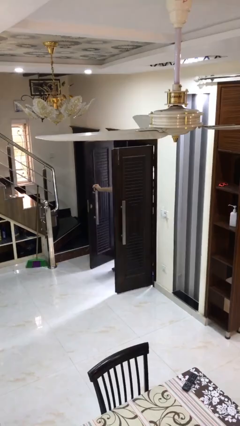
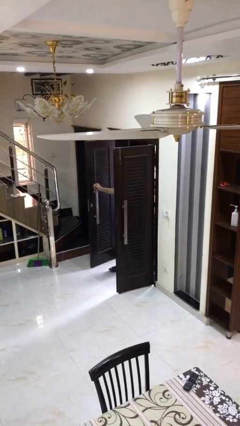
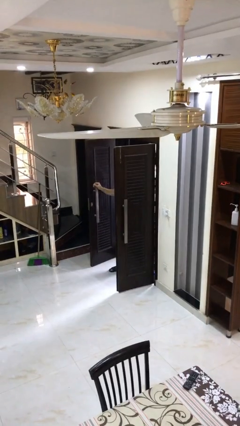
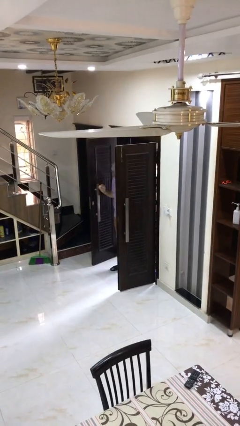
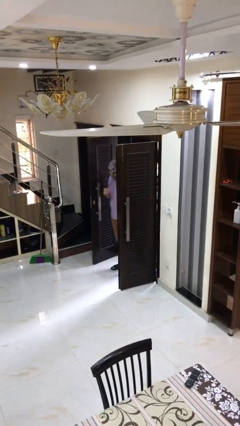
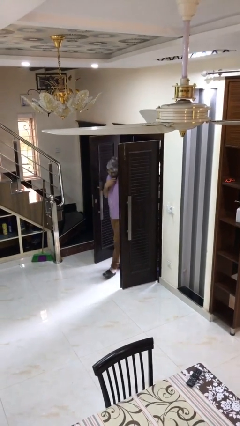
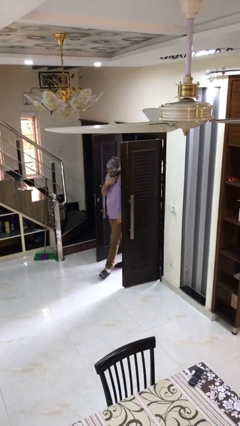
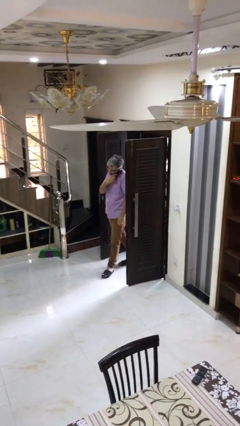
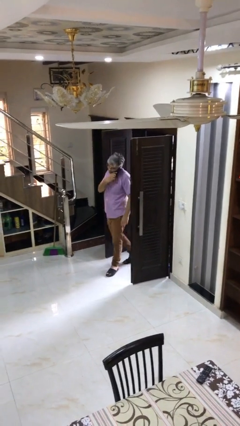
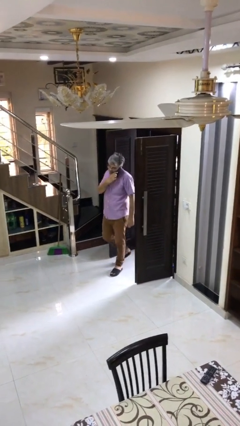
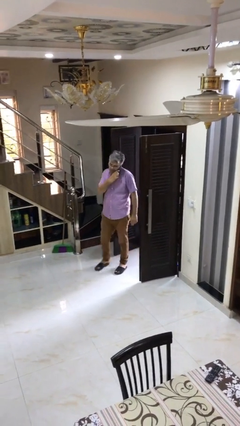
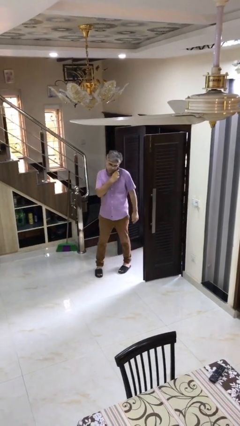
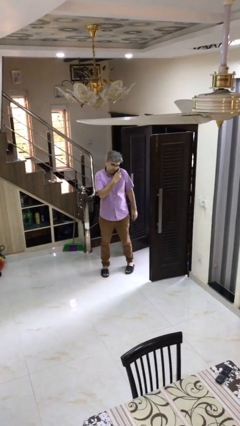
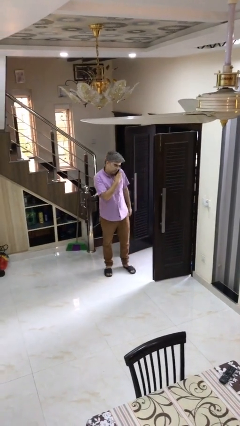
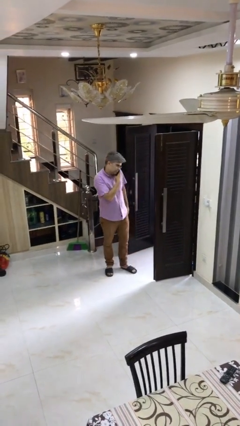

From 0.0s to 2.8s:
person enters scene through structure

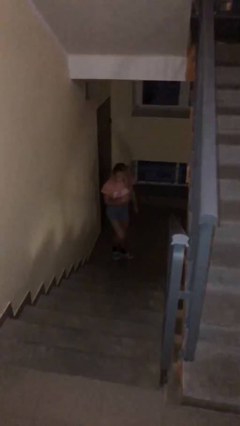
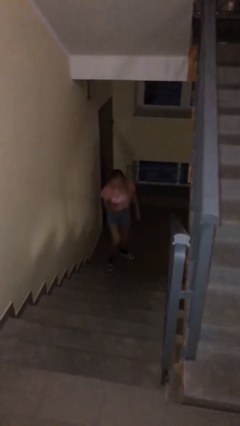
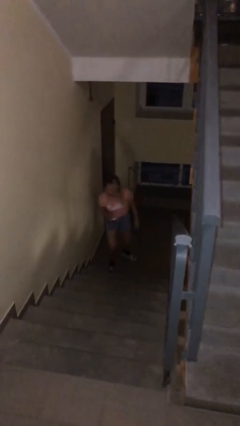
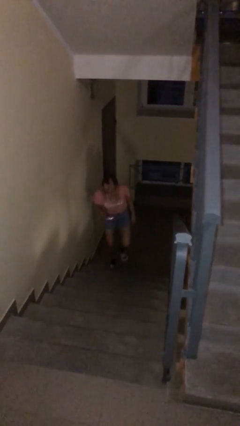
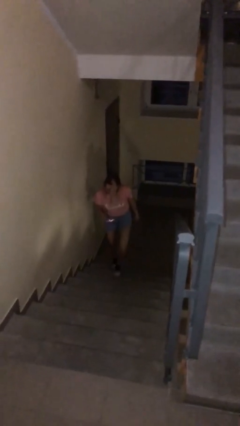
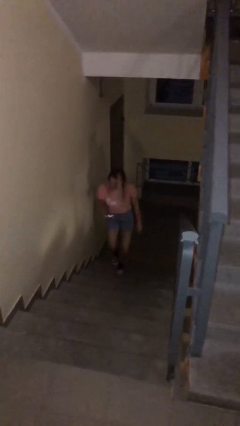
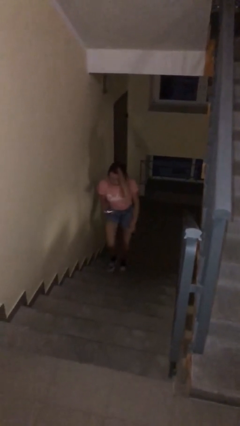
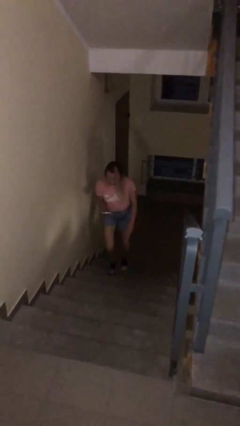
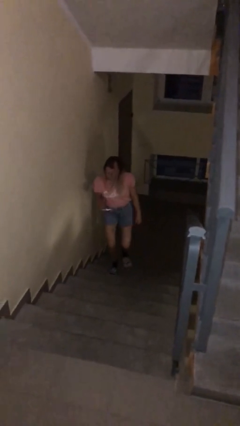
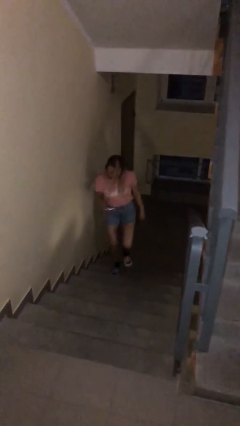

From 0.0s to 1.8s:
person climbs up stairs

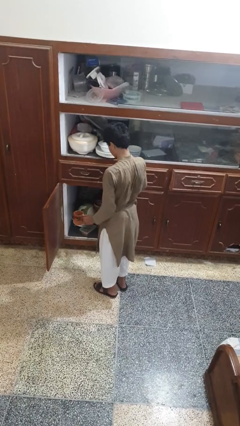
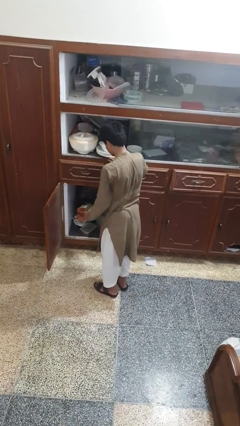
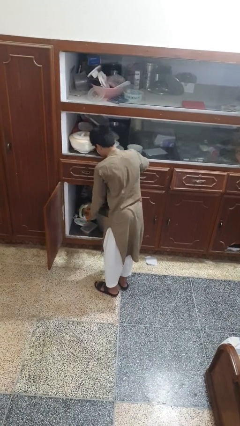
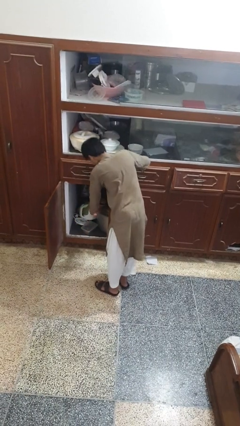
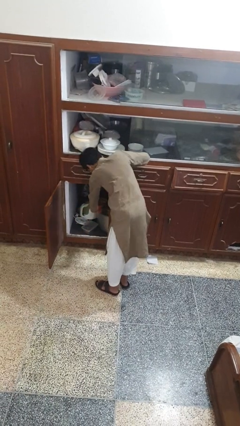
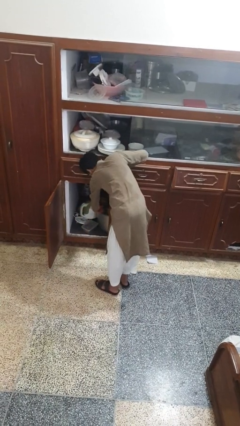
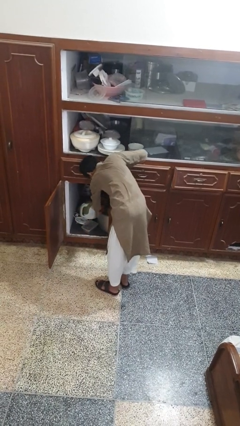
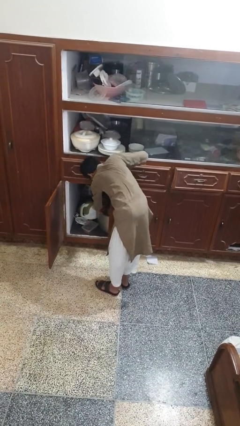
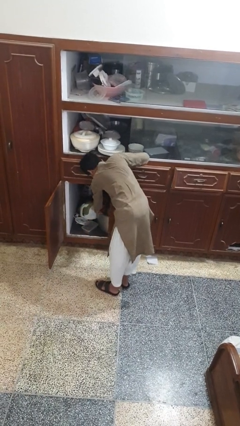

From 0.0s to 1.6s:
person puts object in cabinet

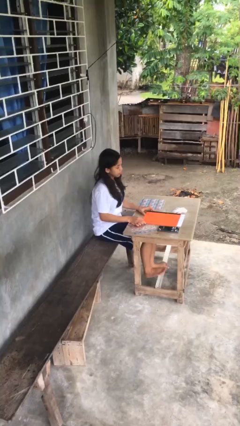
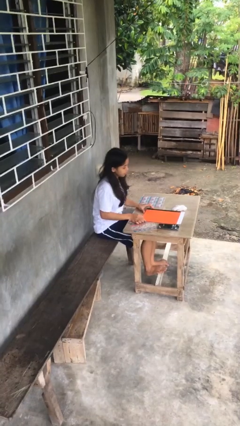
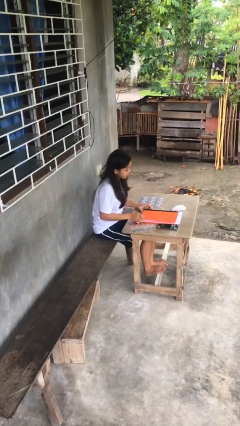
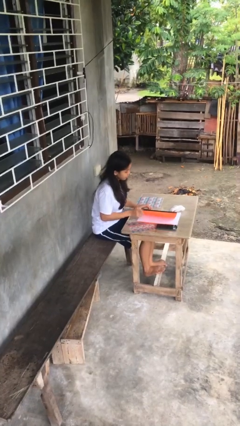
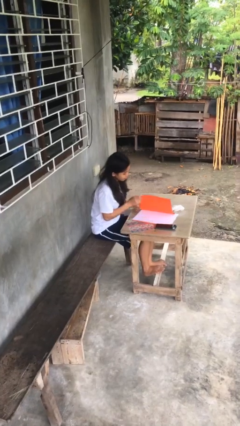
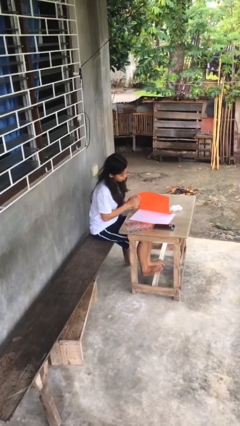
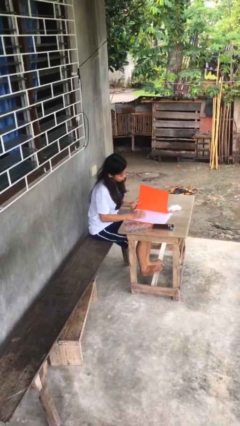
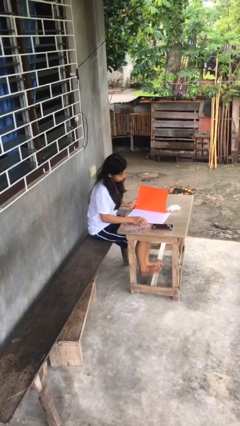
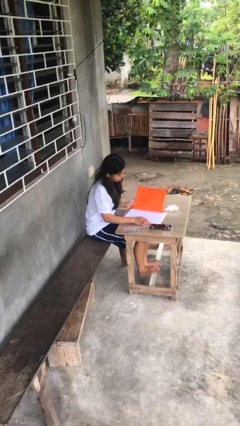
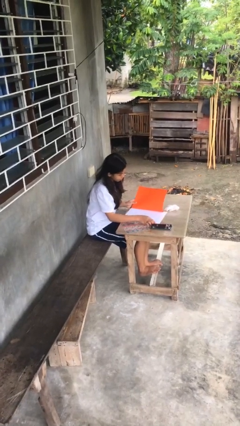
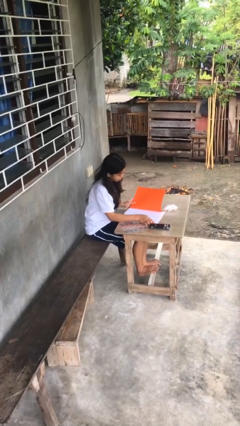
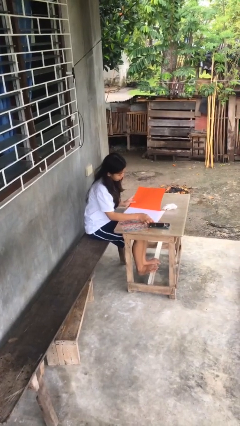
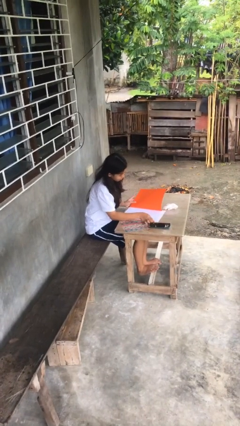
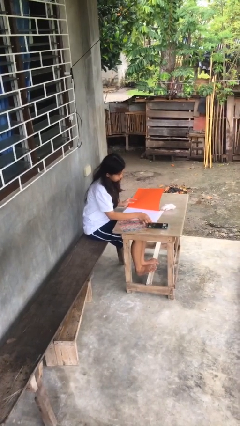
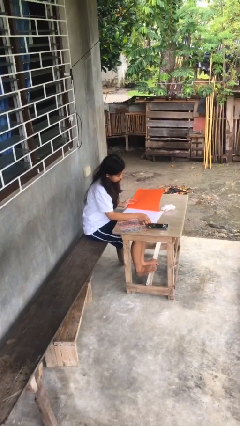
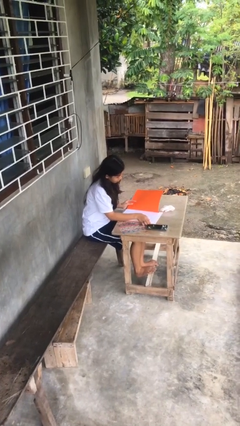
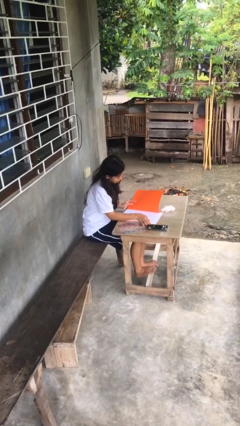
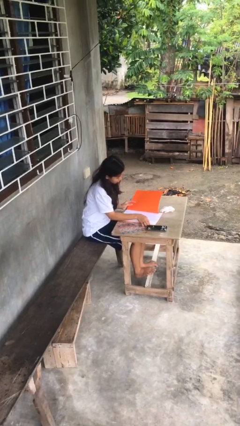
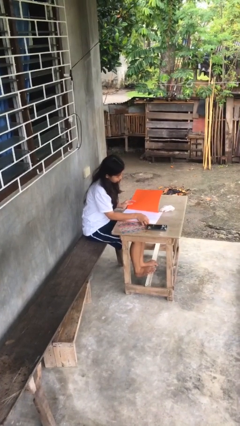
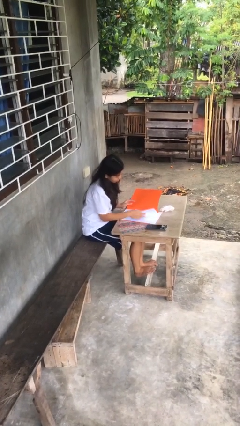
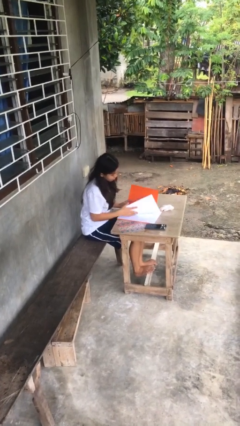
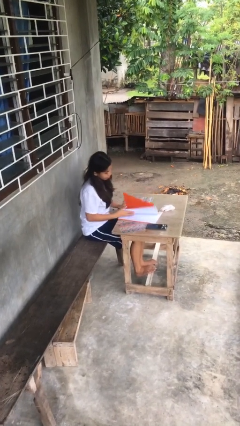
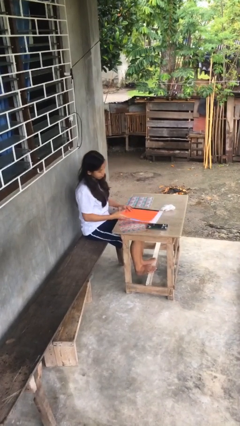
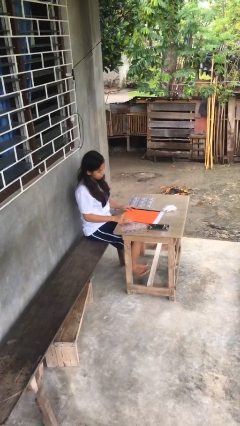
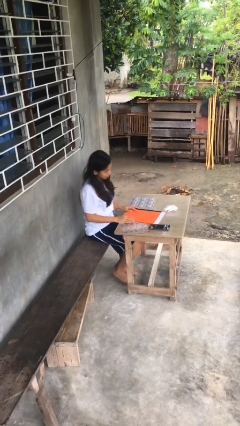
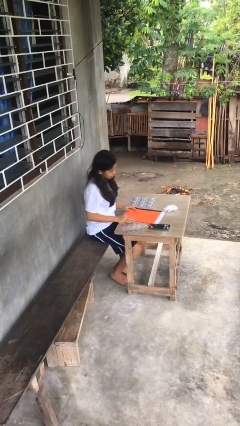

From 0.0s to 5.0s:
person reads document

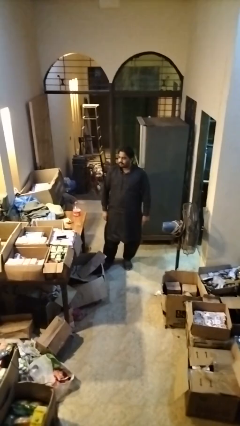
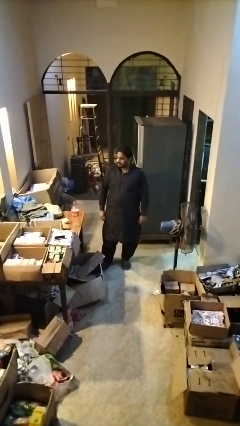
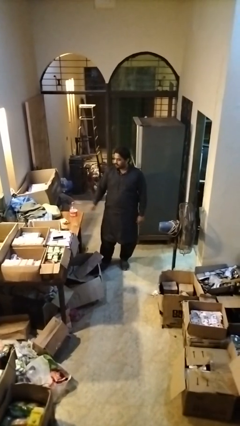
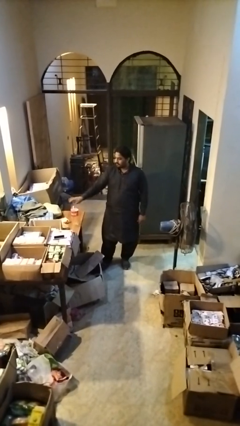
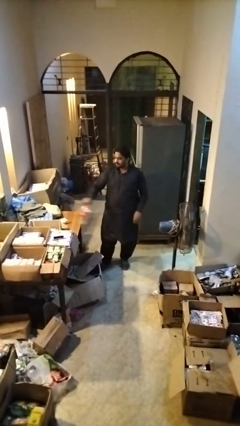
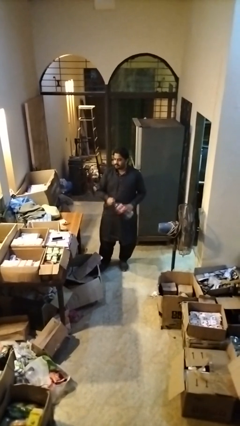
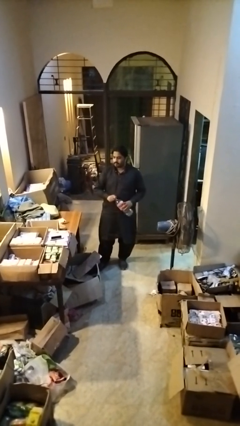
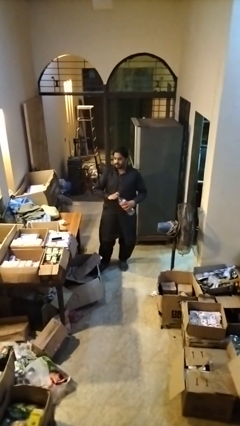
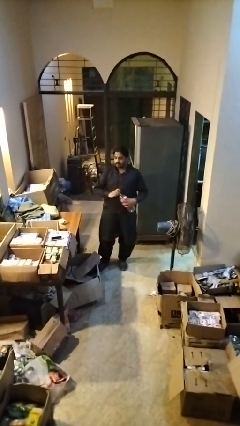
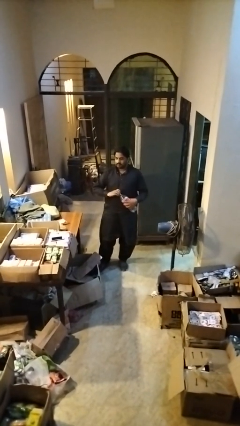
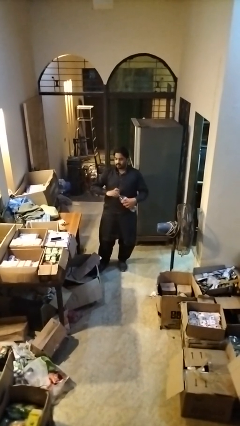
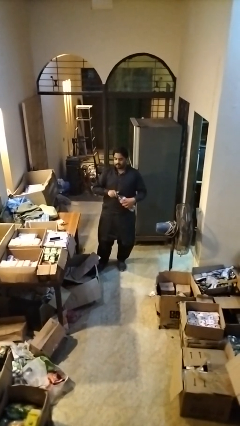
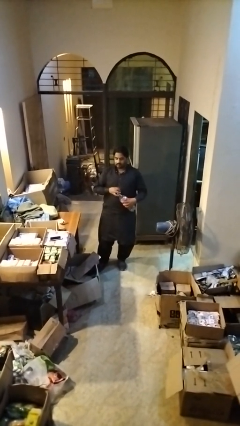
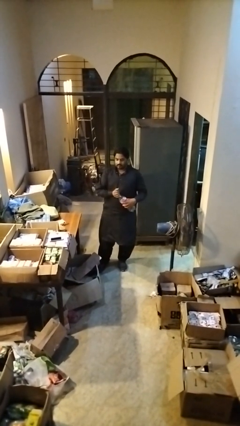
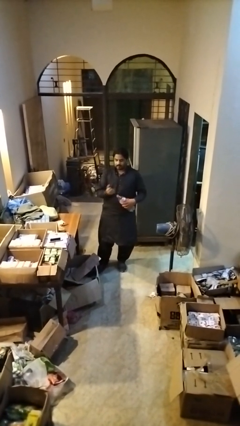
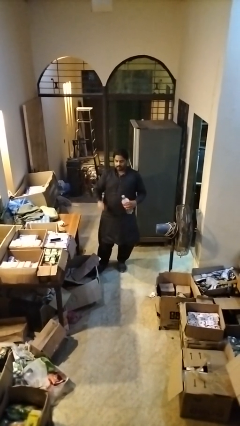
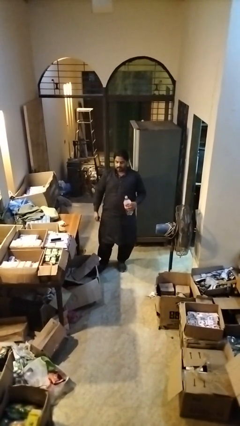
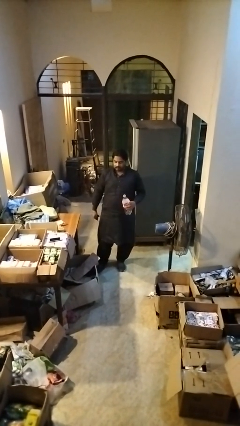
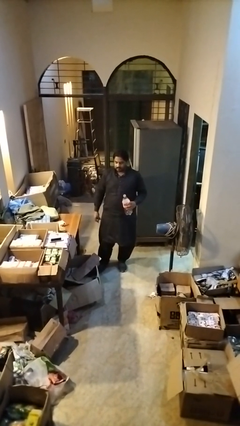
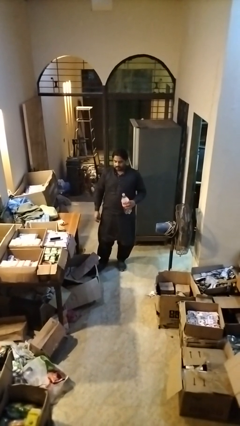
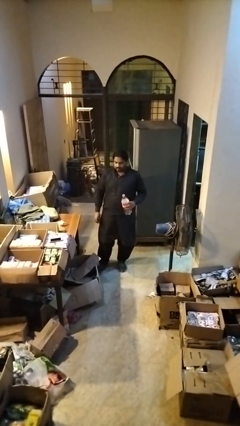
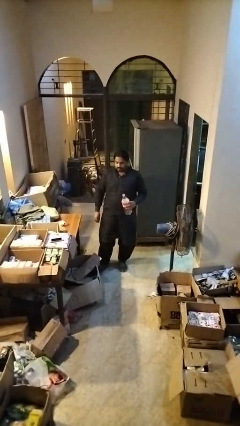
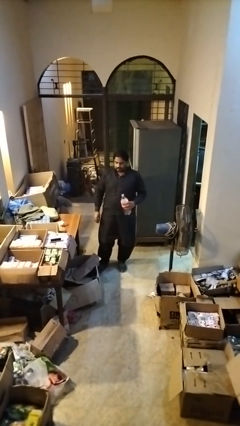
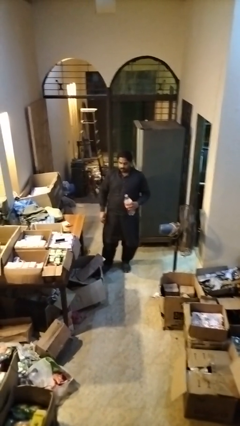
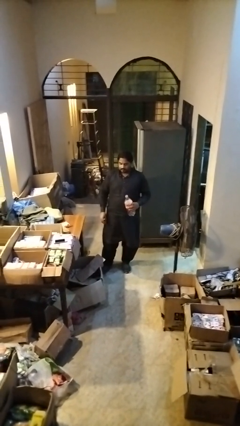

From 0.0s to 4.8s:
person unscrews lid from bottle

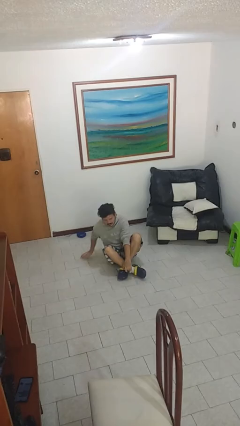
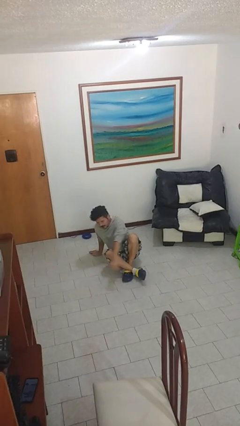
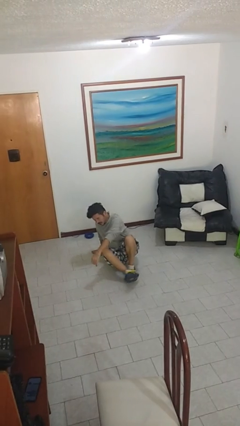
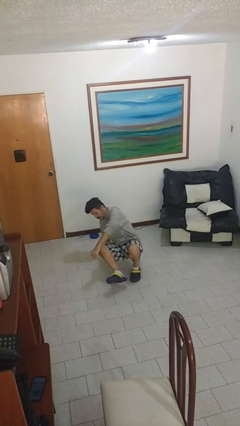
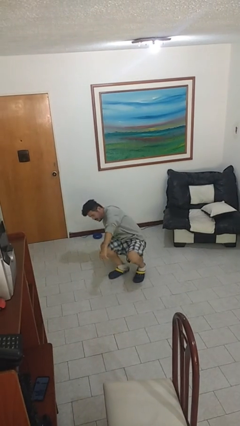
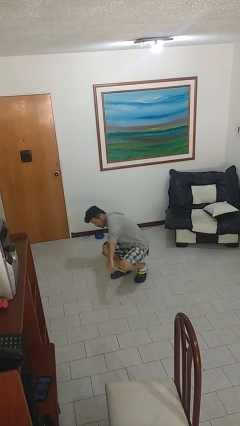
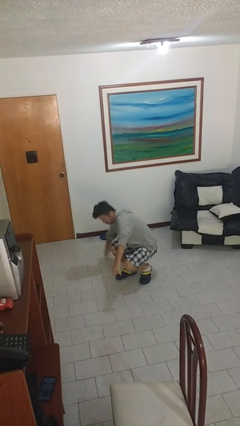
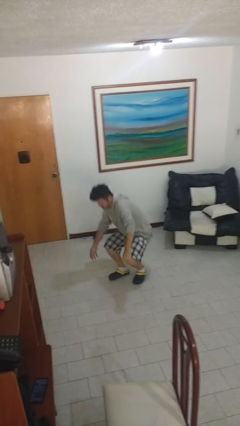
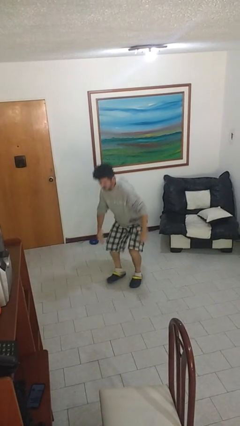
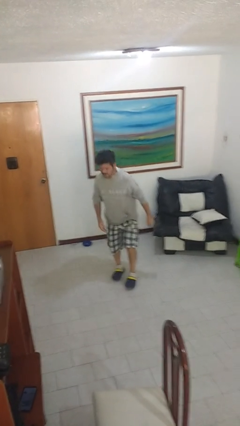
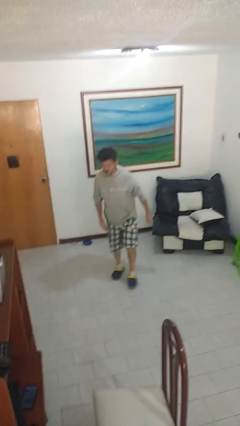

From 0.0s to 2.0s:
person stands up from floor
